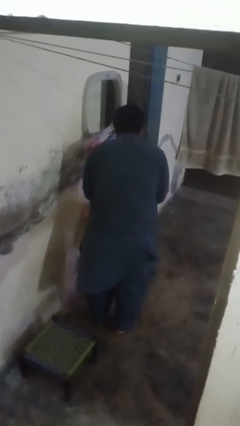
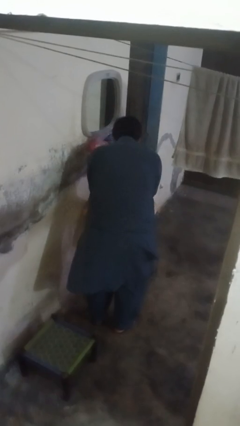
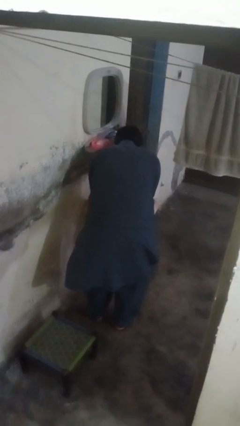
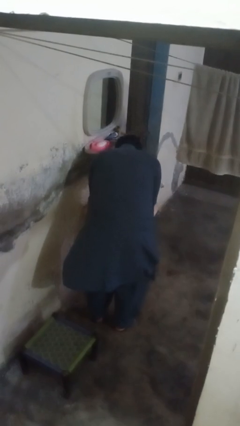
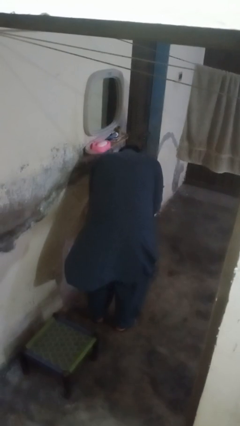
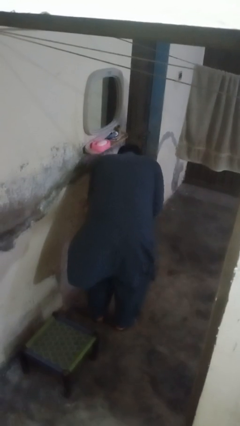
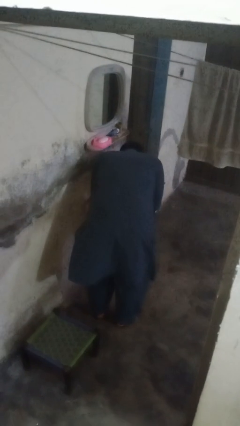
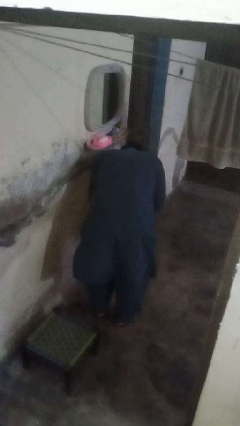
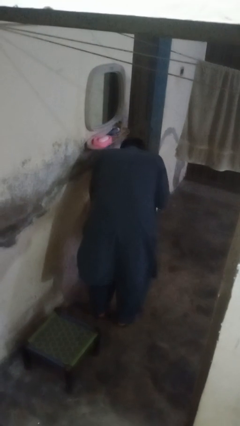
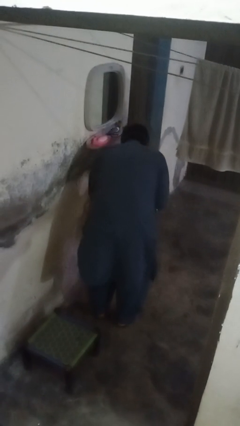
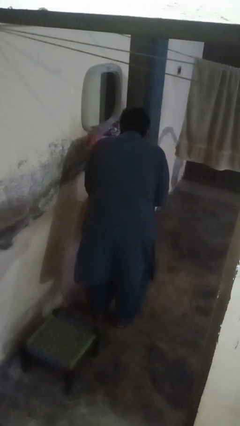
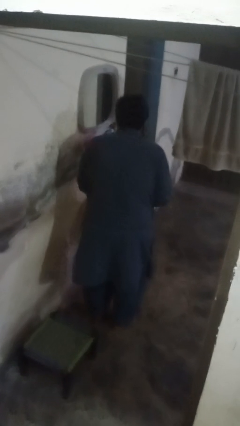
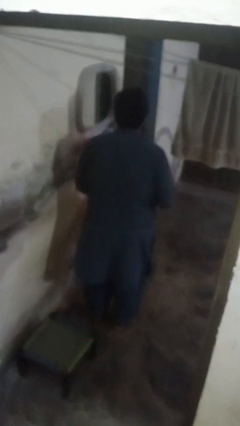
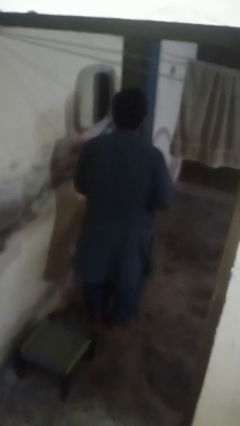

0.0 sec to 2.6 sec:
person washes face

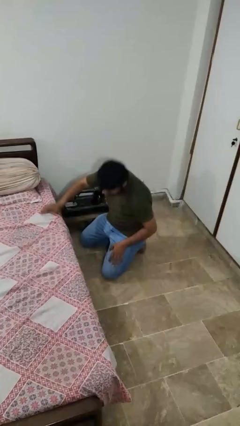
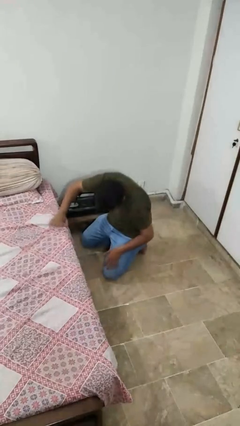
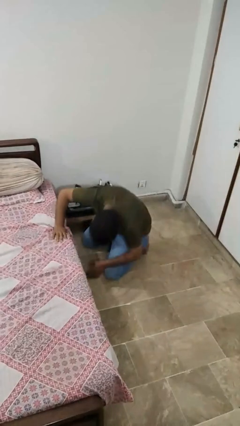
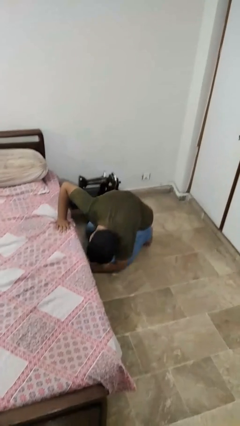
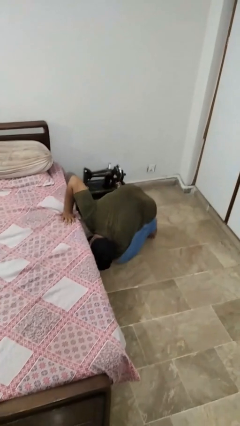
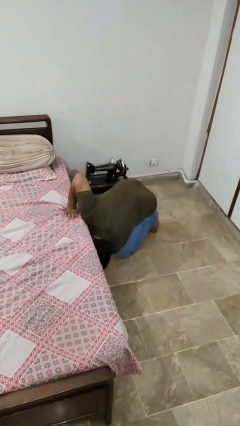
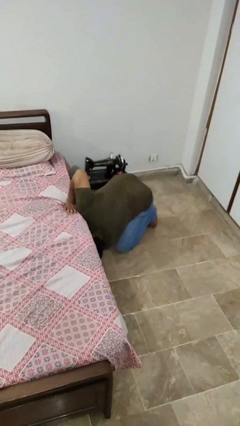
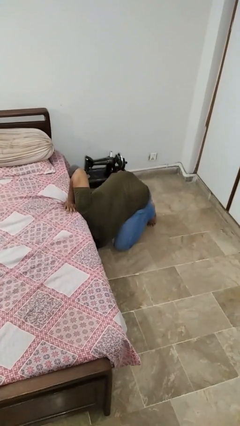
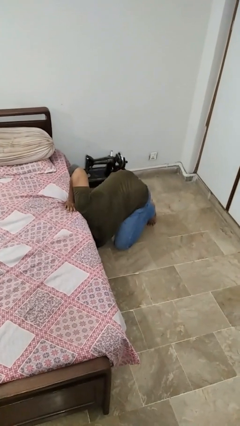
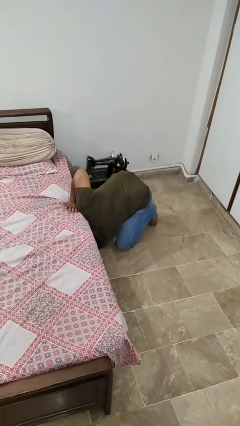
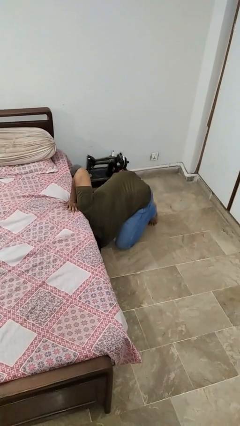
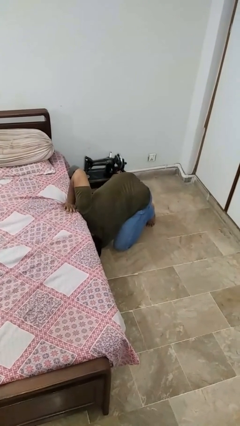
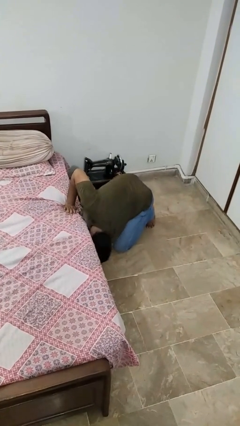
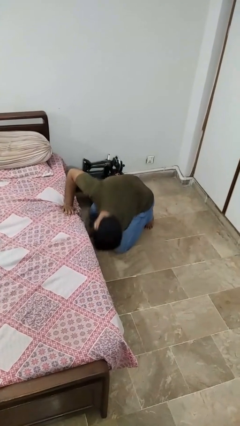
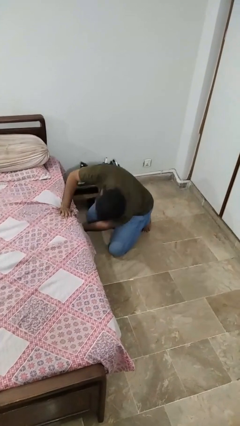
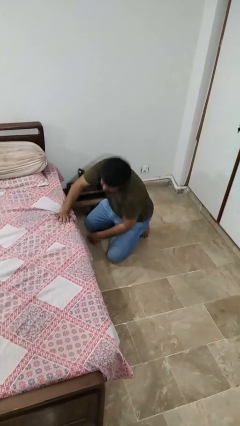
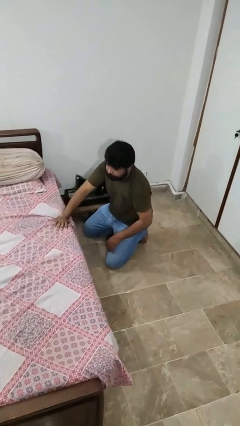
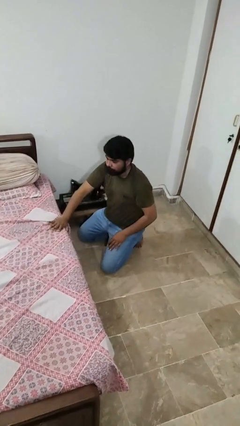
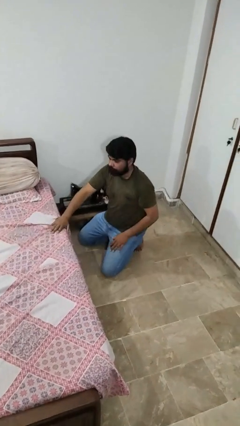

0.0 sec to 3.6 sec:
person searches under bed

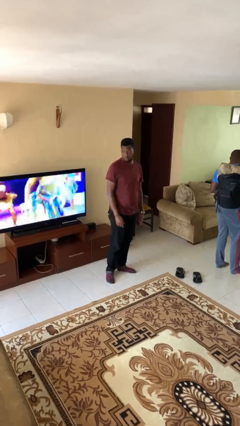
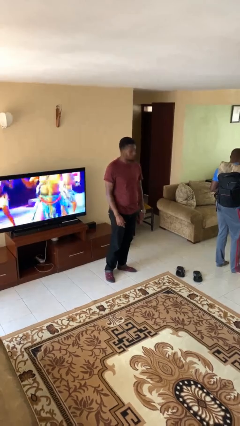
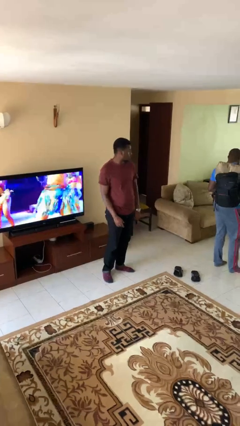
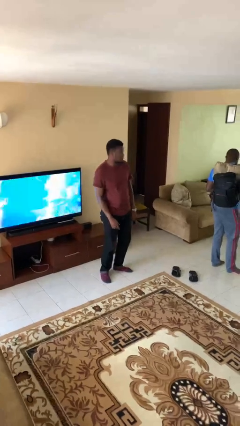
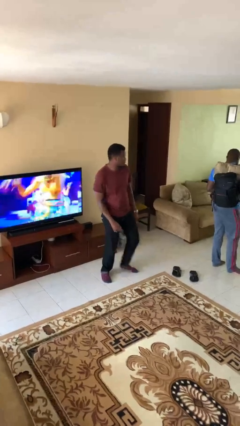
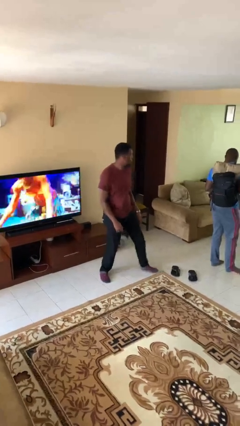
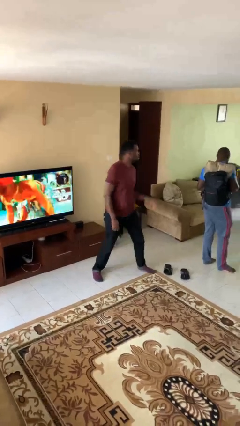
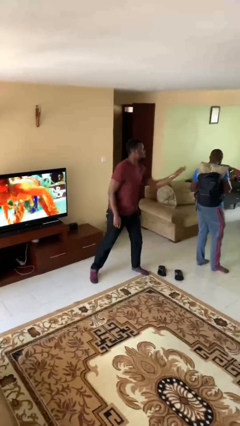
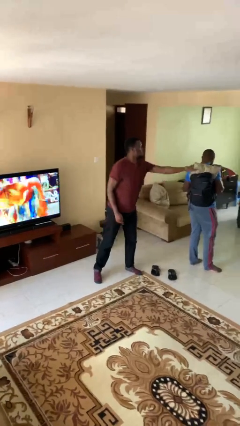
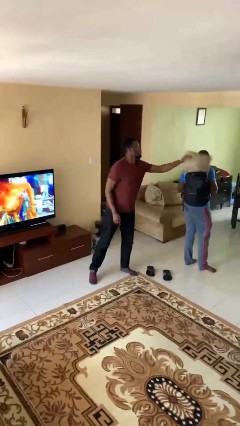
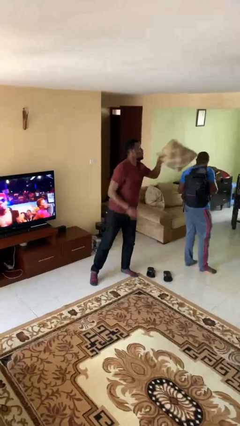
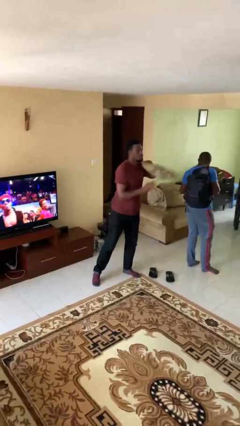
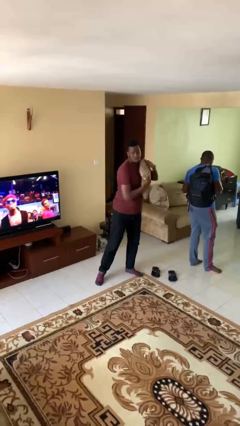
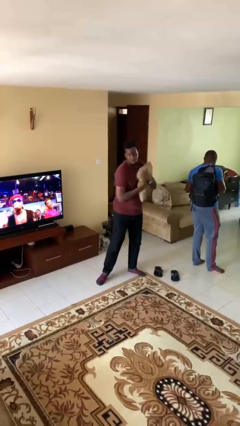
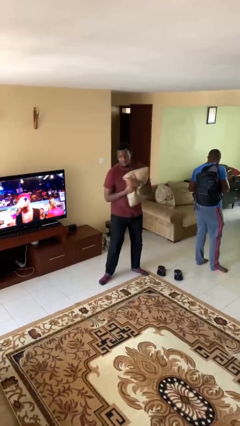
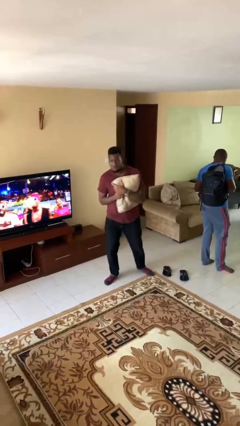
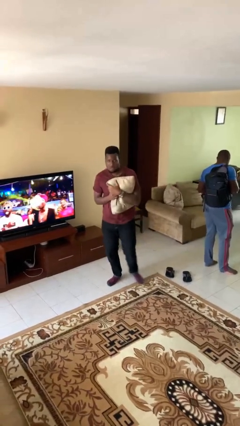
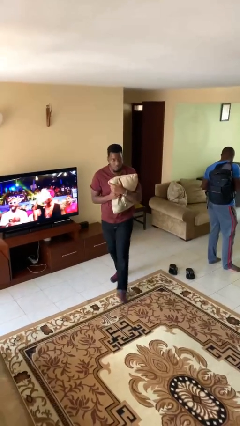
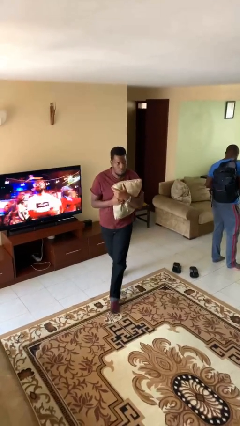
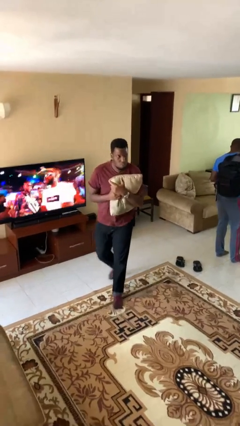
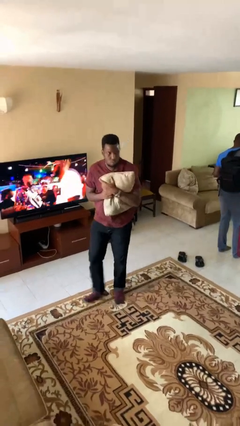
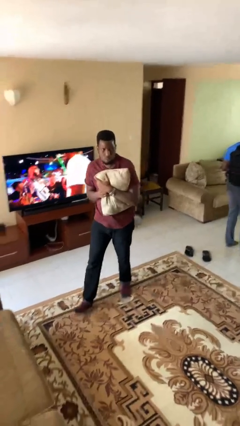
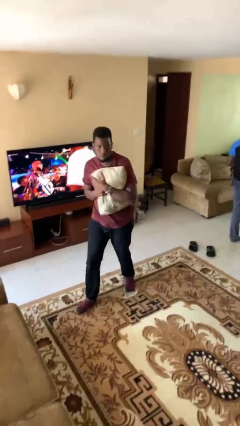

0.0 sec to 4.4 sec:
person steals object from person

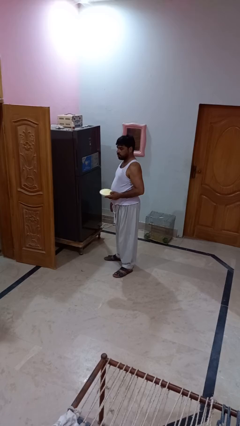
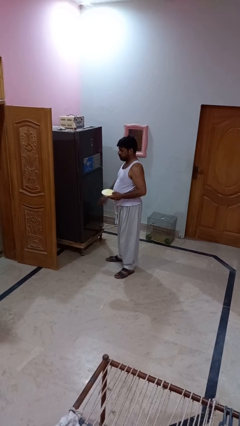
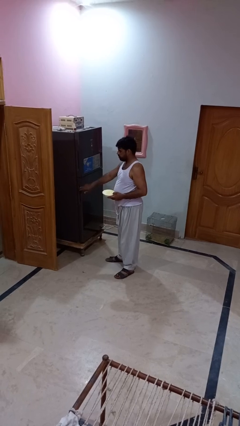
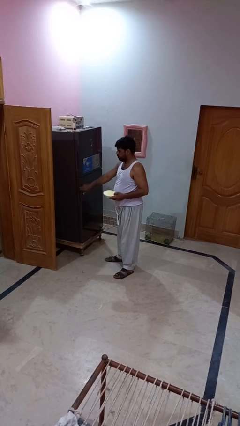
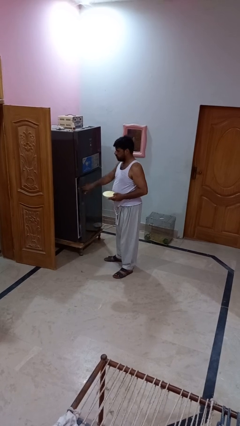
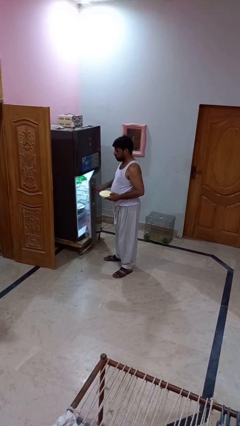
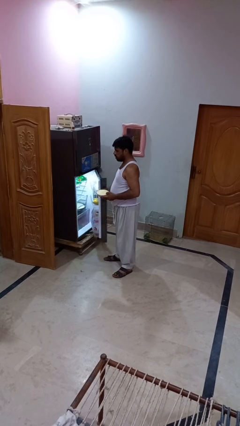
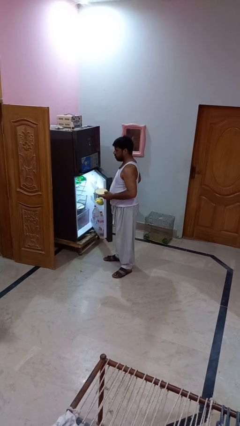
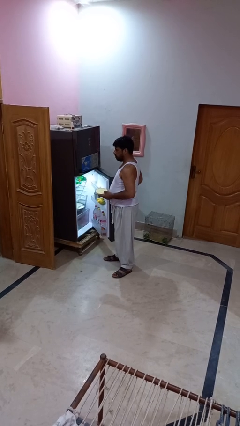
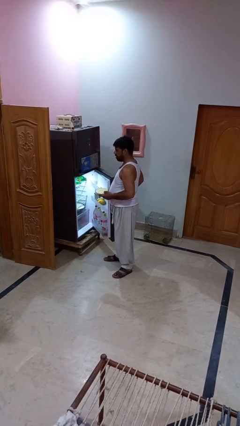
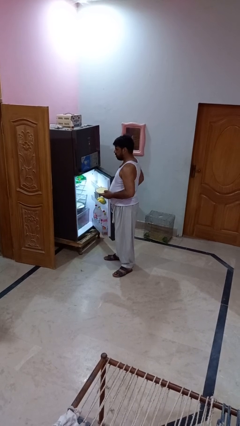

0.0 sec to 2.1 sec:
person opens refrigerator

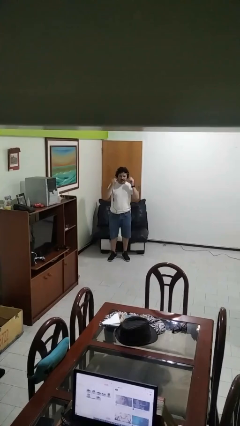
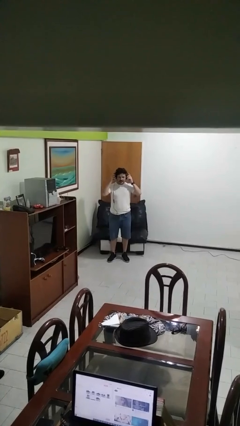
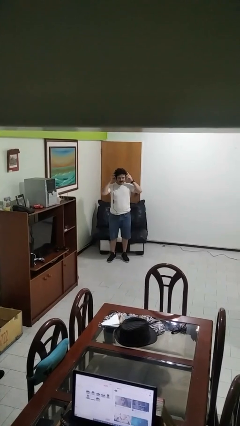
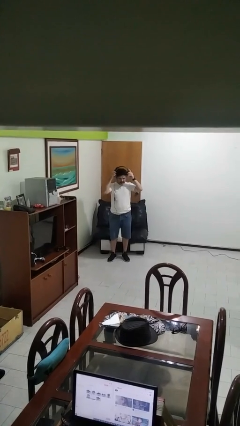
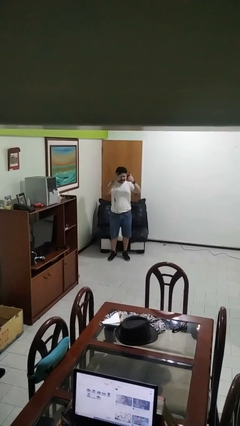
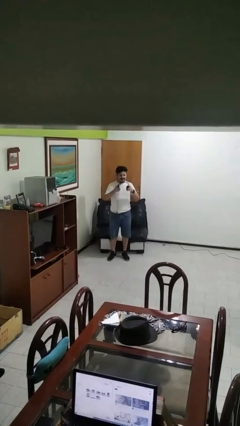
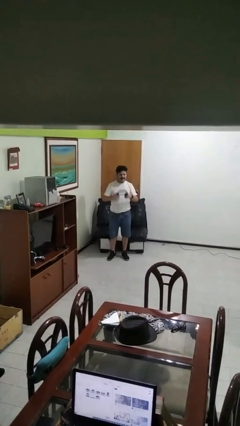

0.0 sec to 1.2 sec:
person takes off headphones

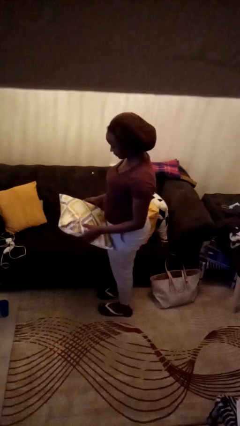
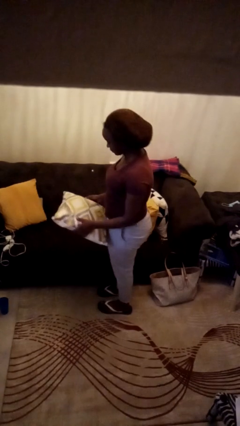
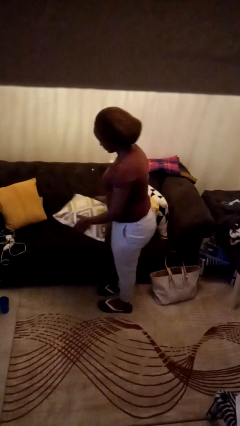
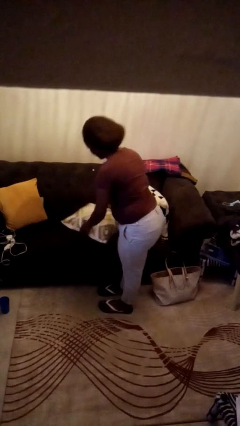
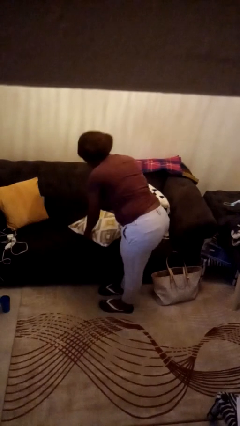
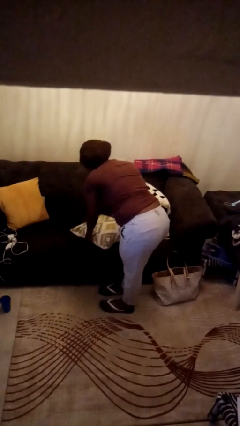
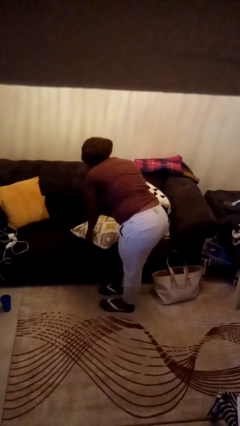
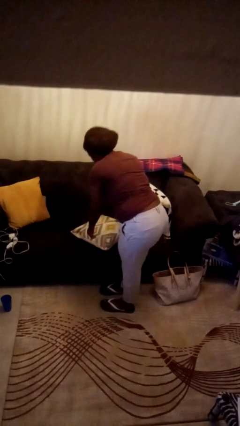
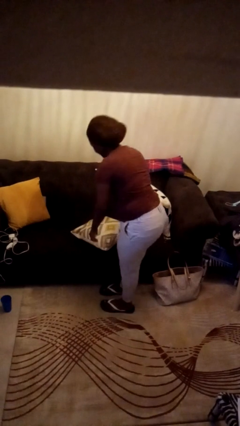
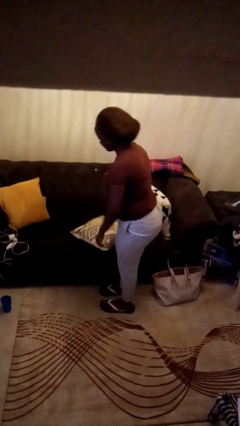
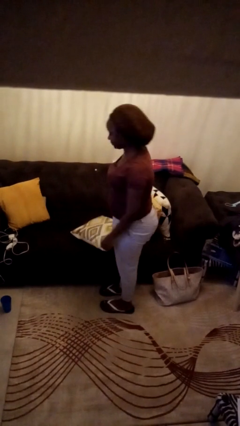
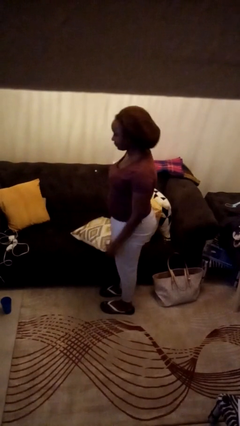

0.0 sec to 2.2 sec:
person puts down object on couch

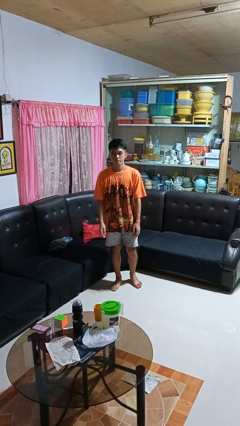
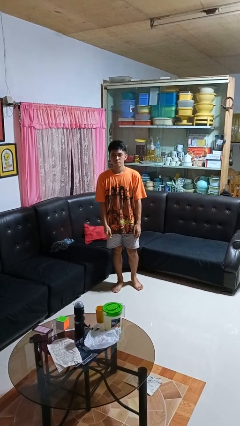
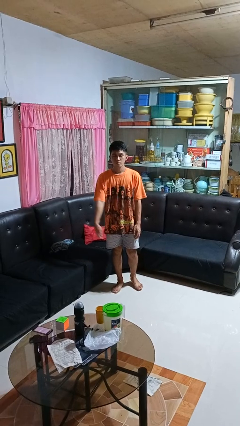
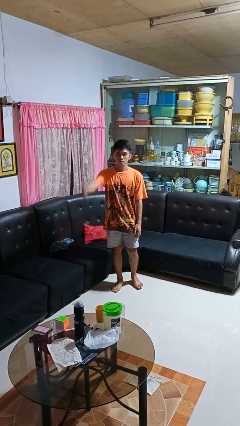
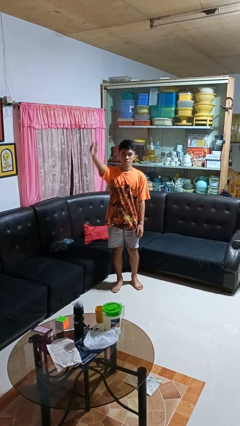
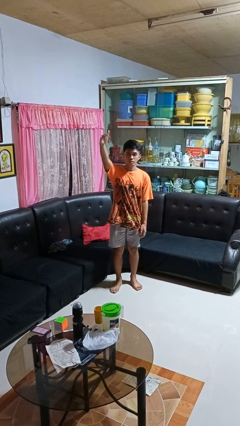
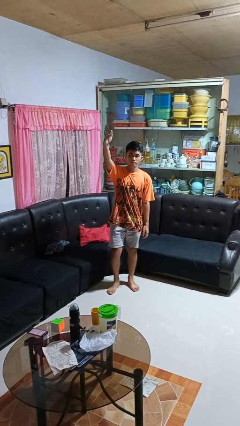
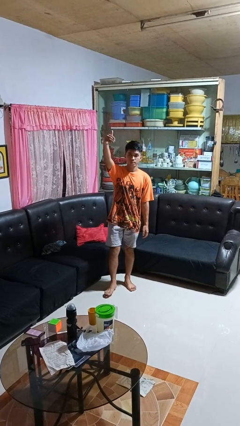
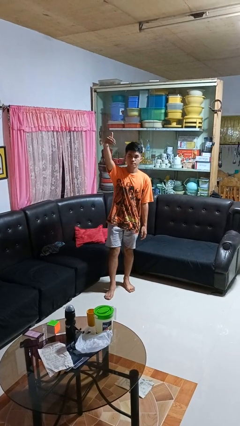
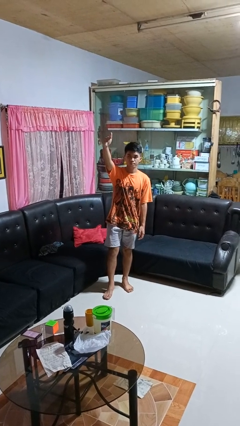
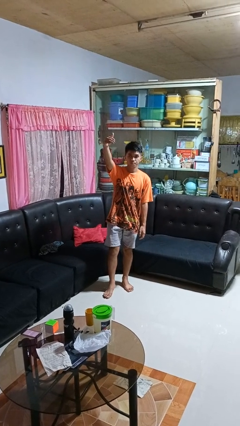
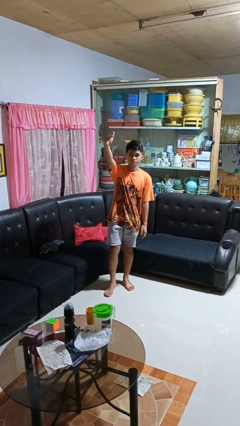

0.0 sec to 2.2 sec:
person gestures come here
